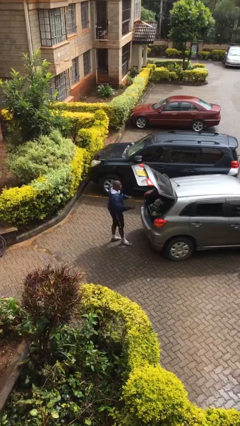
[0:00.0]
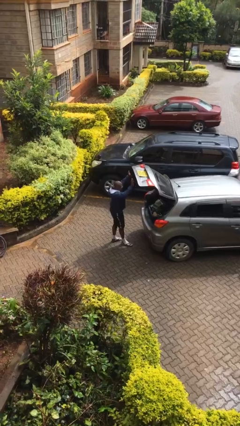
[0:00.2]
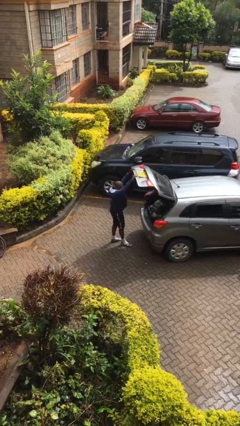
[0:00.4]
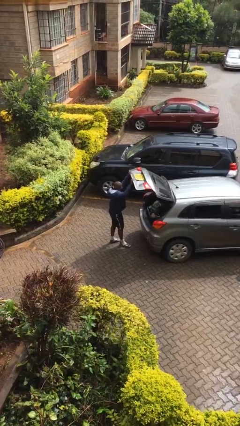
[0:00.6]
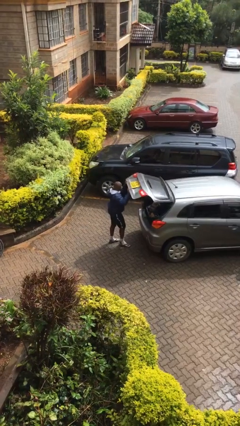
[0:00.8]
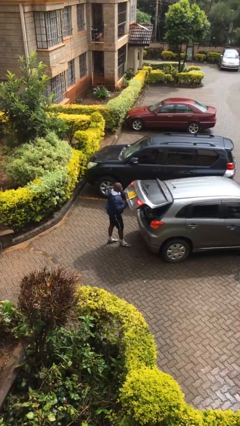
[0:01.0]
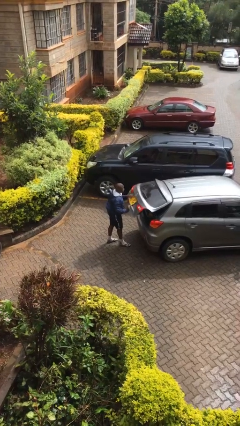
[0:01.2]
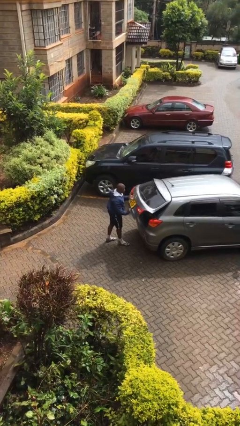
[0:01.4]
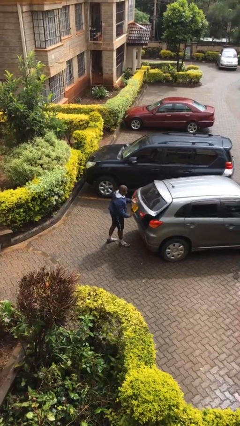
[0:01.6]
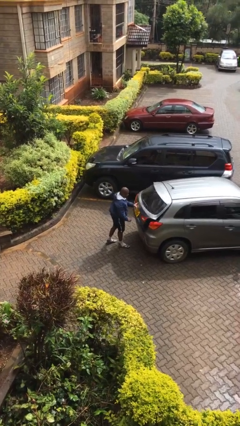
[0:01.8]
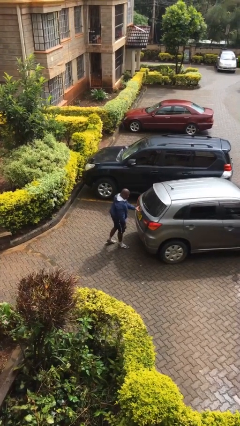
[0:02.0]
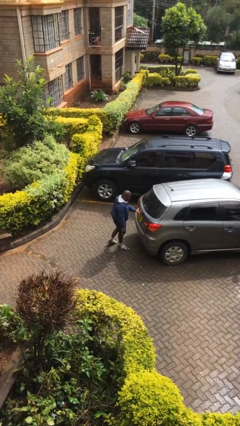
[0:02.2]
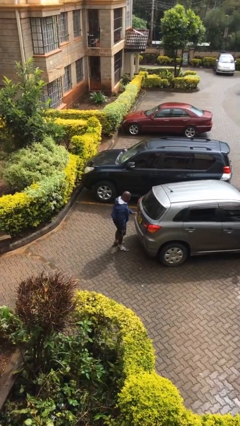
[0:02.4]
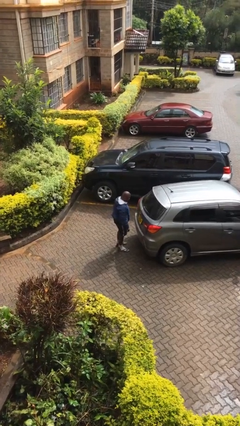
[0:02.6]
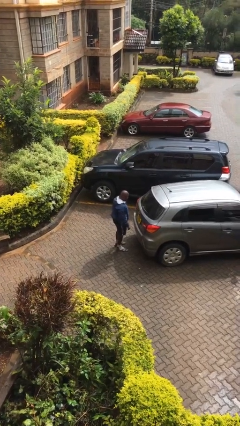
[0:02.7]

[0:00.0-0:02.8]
person closes car trunk

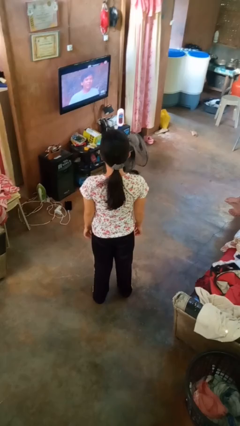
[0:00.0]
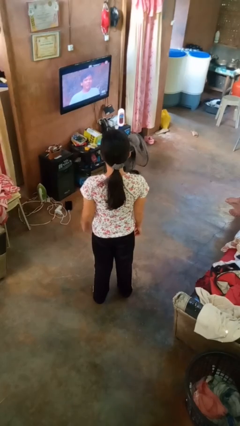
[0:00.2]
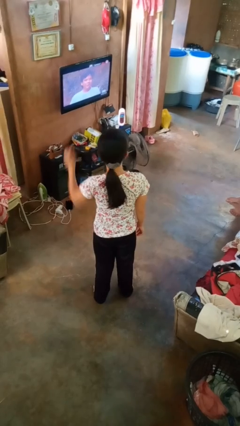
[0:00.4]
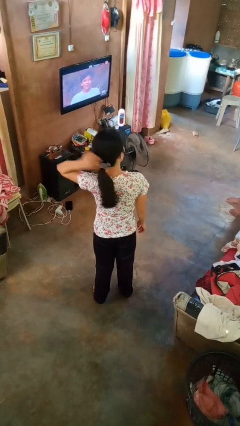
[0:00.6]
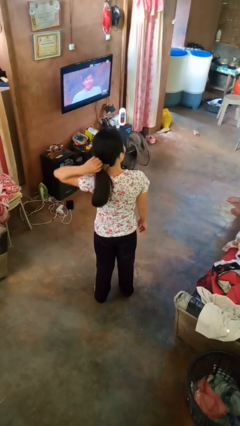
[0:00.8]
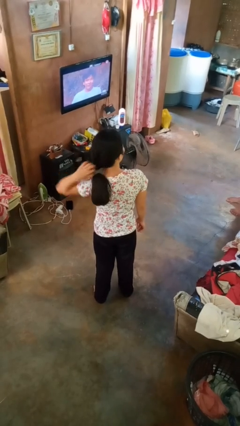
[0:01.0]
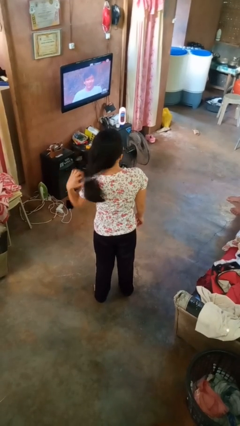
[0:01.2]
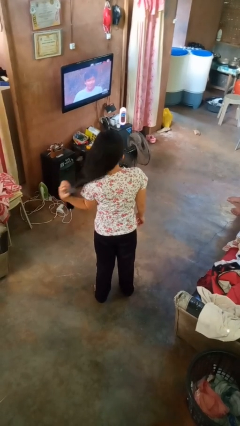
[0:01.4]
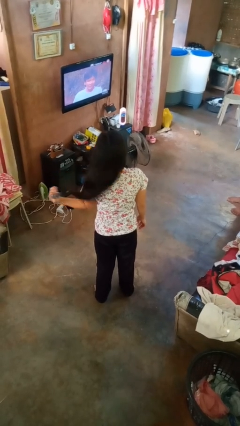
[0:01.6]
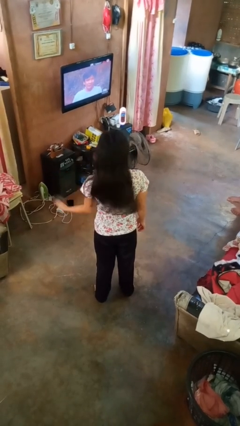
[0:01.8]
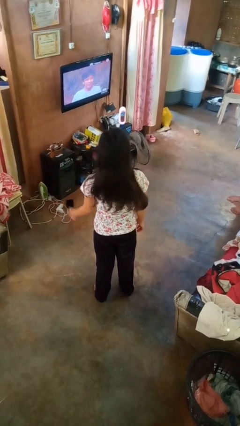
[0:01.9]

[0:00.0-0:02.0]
person takes off hairtie

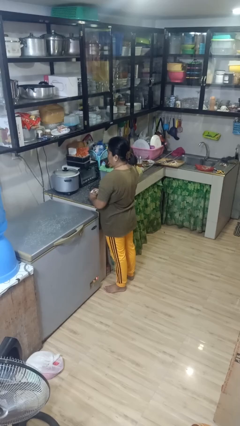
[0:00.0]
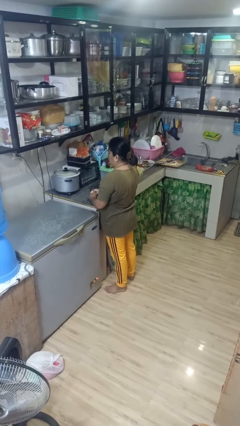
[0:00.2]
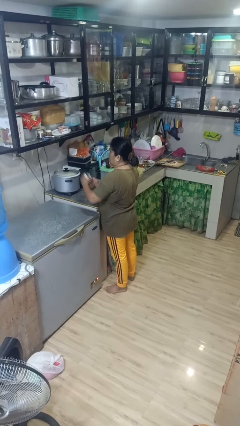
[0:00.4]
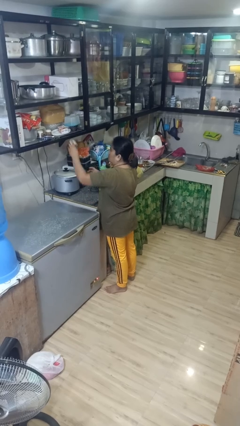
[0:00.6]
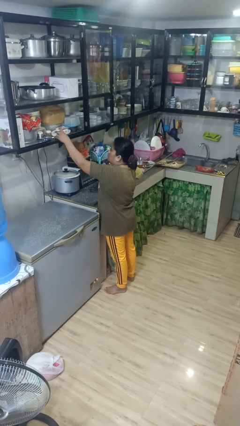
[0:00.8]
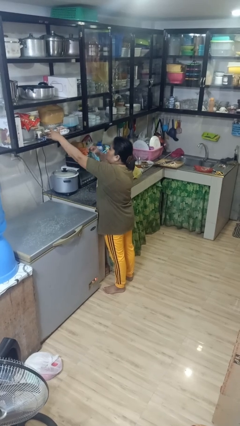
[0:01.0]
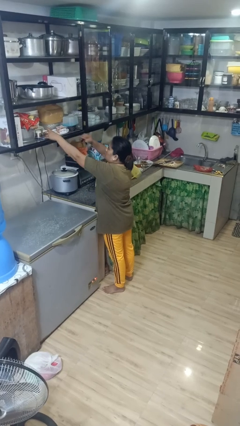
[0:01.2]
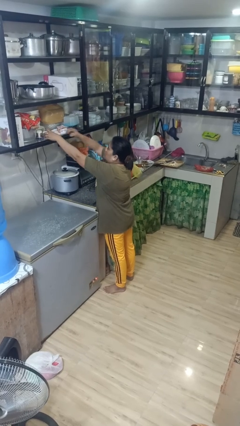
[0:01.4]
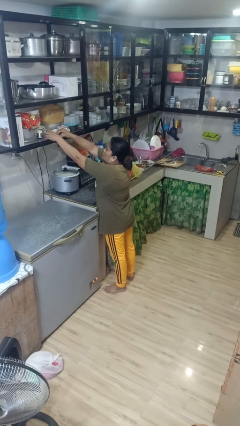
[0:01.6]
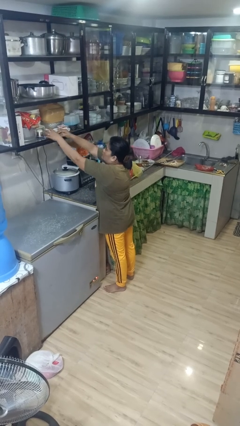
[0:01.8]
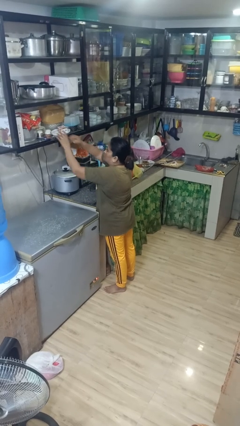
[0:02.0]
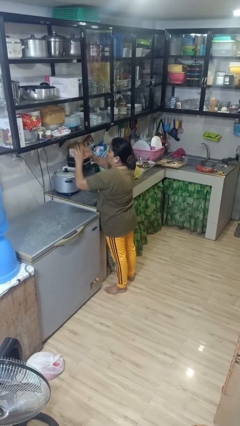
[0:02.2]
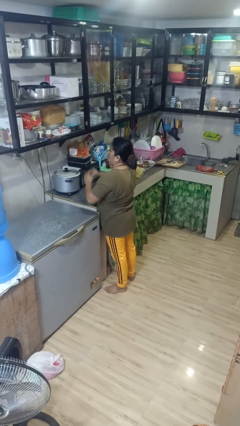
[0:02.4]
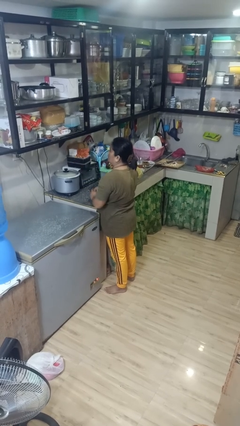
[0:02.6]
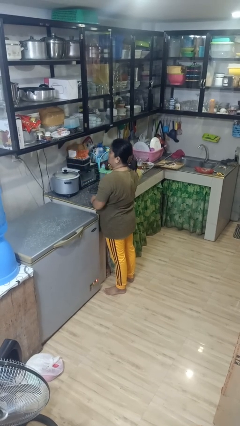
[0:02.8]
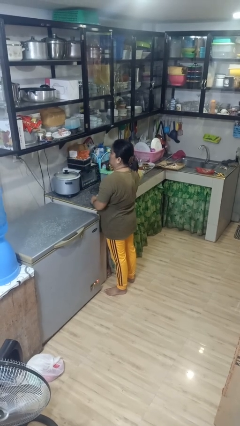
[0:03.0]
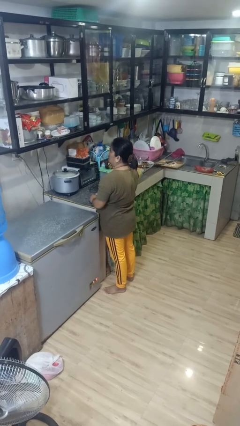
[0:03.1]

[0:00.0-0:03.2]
person puts object in cabinet

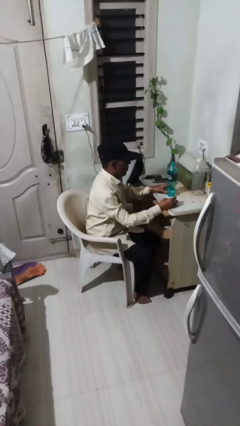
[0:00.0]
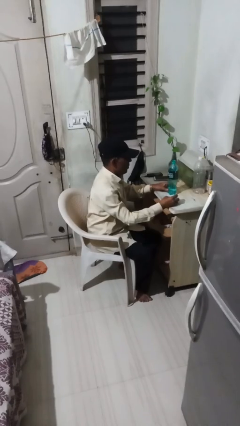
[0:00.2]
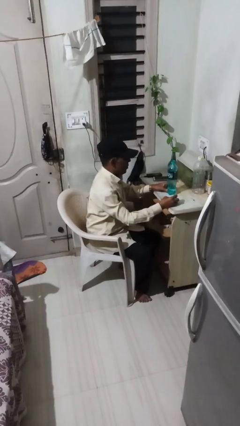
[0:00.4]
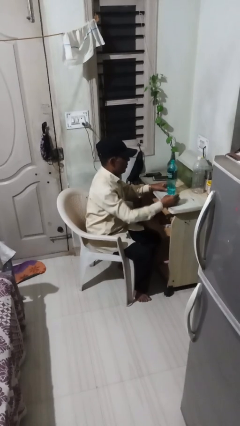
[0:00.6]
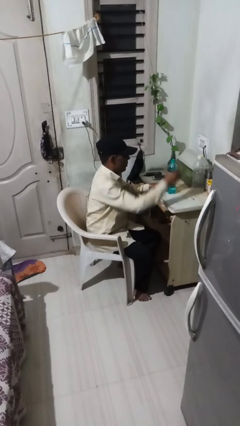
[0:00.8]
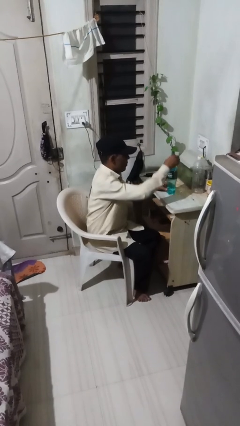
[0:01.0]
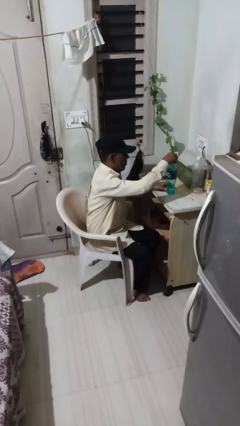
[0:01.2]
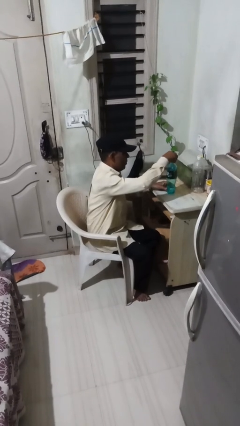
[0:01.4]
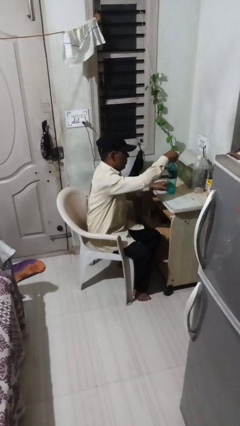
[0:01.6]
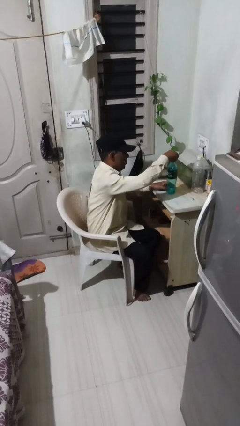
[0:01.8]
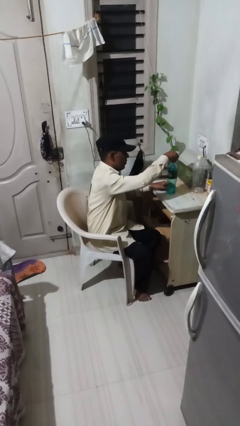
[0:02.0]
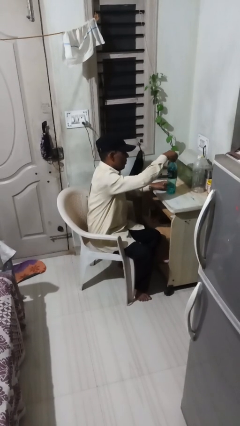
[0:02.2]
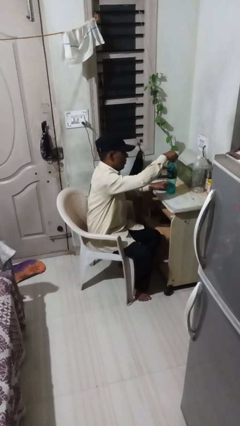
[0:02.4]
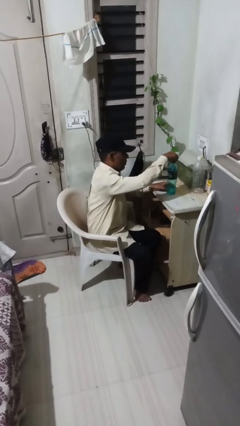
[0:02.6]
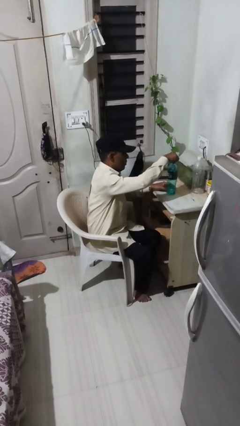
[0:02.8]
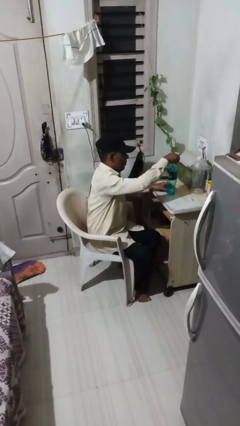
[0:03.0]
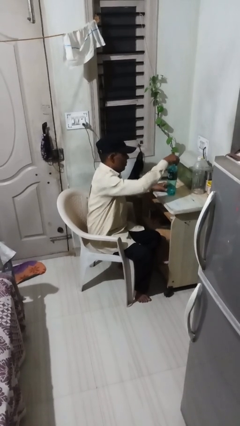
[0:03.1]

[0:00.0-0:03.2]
person screws lid to bottle

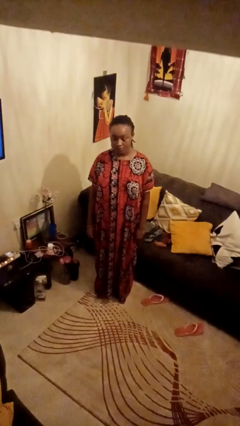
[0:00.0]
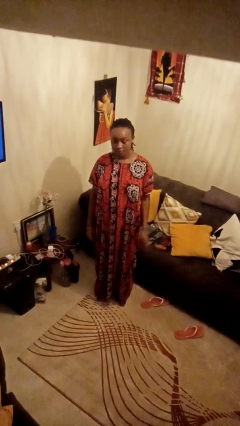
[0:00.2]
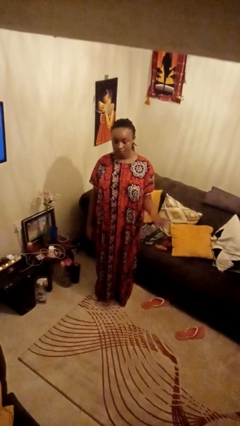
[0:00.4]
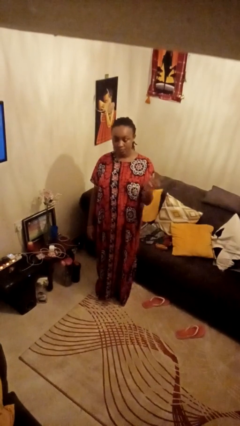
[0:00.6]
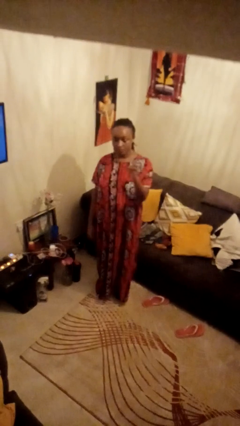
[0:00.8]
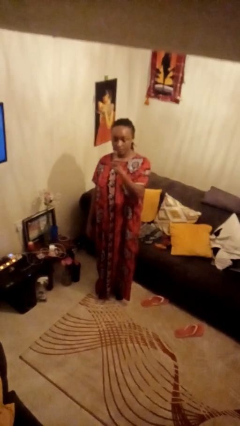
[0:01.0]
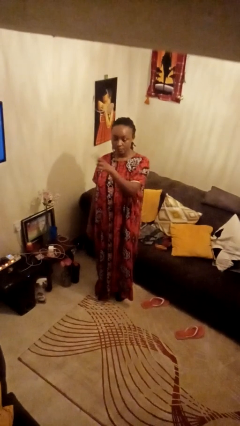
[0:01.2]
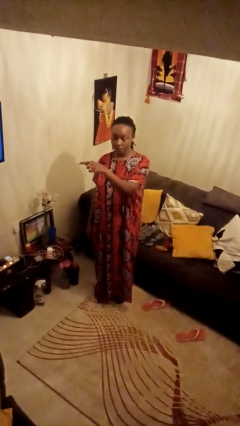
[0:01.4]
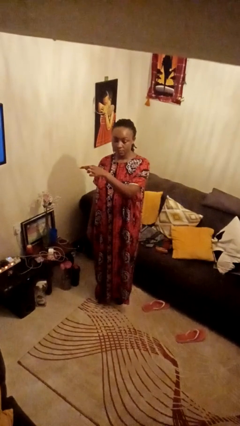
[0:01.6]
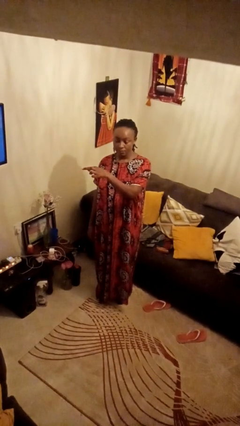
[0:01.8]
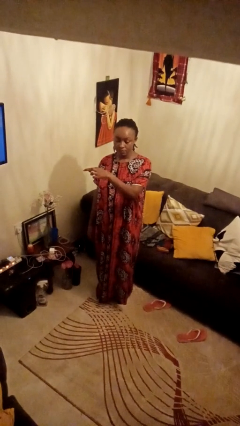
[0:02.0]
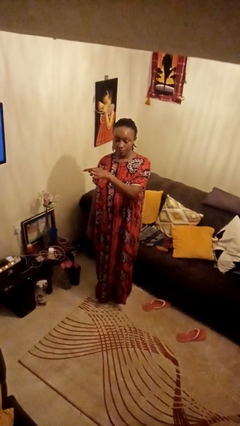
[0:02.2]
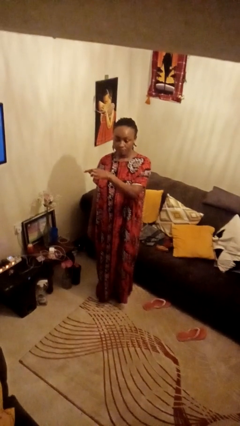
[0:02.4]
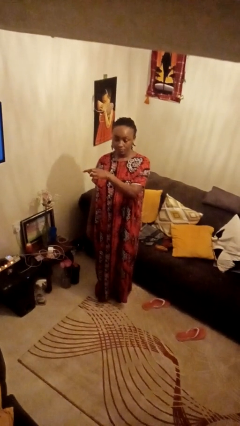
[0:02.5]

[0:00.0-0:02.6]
person gestures swipe left

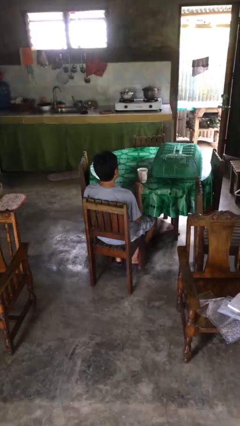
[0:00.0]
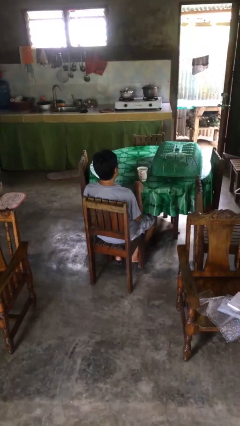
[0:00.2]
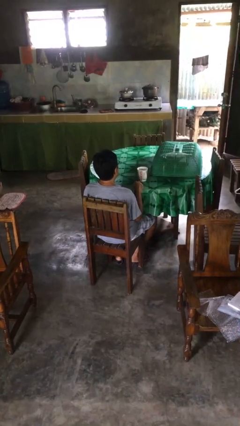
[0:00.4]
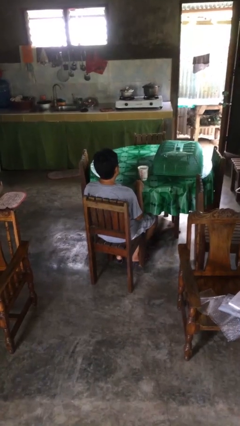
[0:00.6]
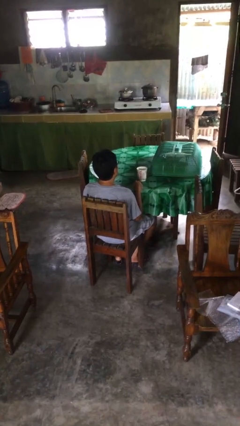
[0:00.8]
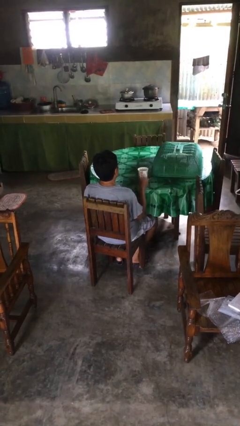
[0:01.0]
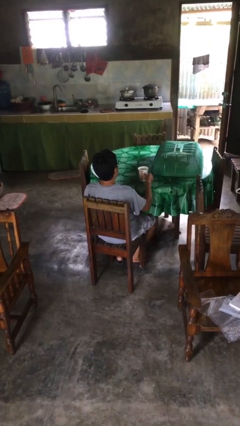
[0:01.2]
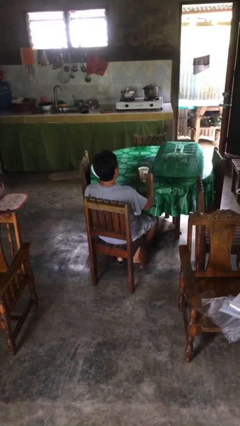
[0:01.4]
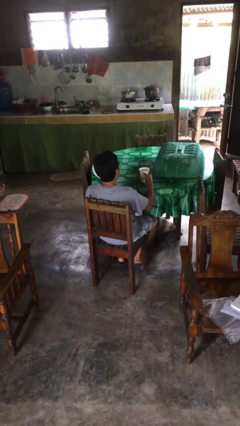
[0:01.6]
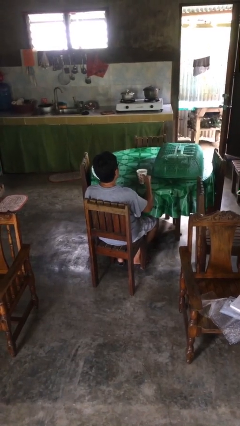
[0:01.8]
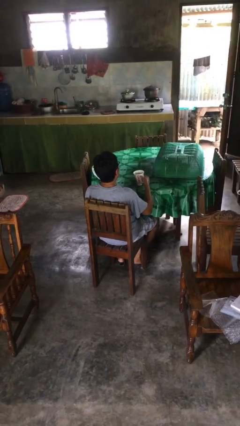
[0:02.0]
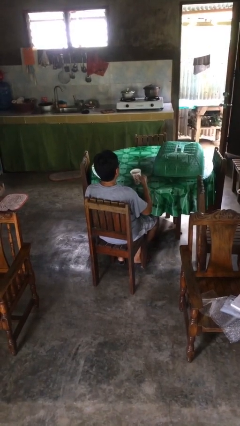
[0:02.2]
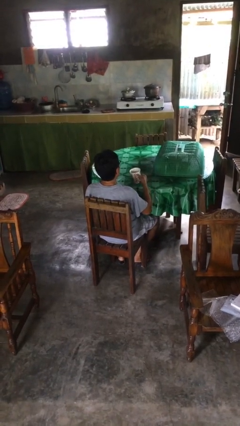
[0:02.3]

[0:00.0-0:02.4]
person picks up object from table

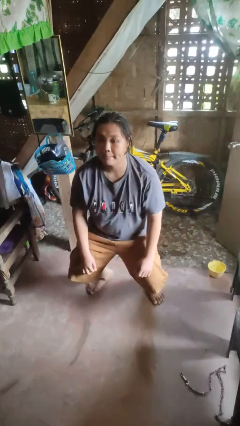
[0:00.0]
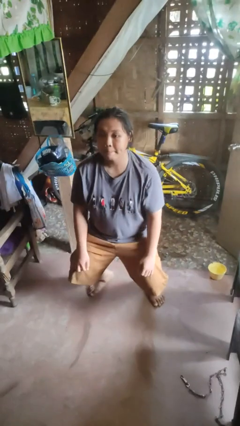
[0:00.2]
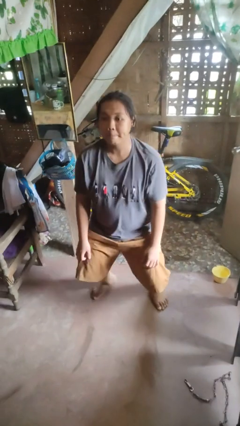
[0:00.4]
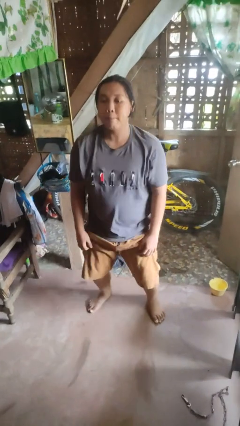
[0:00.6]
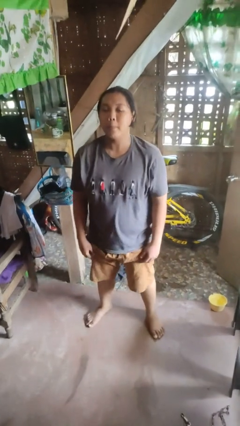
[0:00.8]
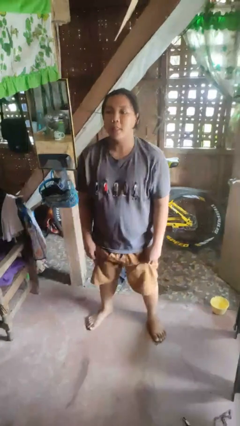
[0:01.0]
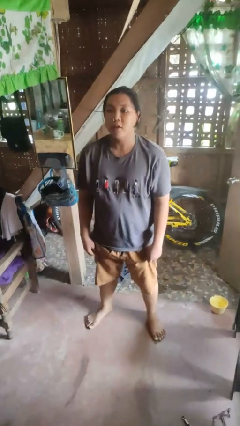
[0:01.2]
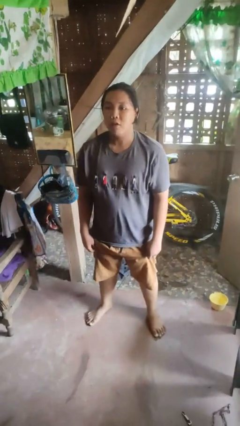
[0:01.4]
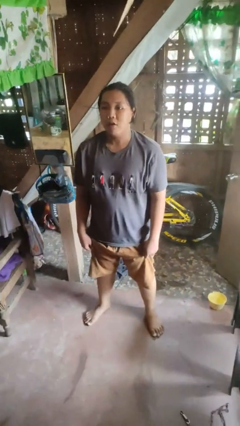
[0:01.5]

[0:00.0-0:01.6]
person stands up
